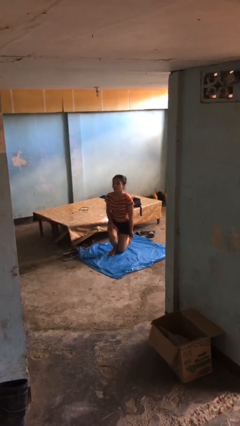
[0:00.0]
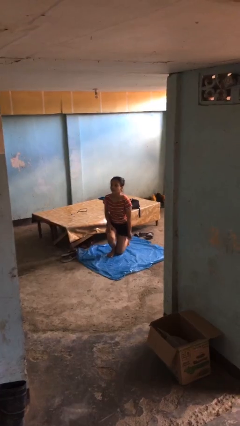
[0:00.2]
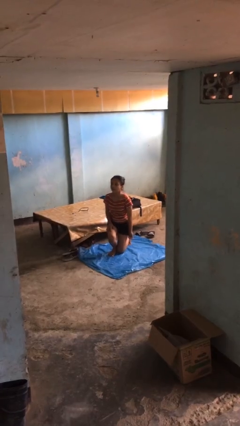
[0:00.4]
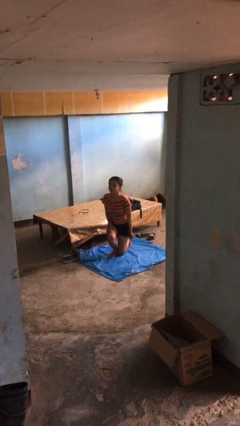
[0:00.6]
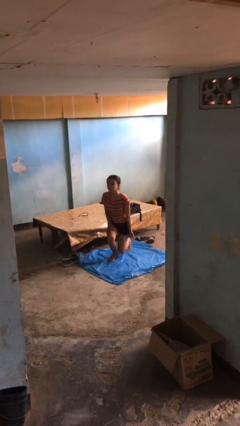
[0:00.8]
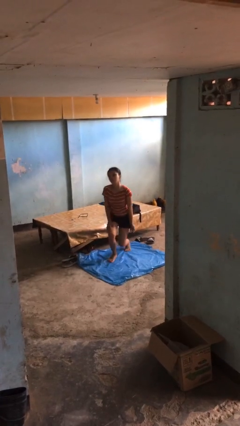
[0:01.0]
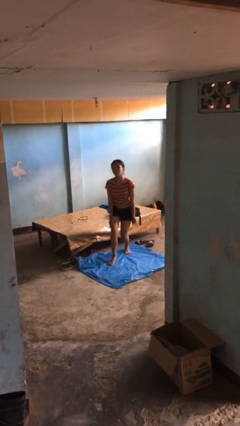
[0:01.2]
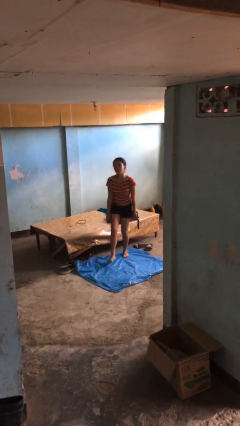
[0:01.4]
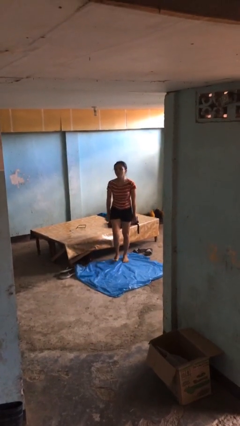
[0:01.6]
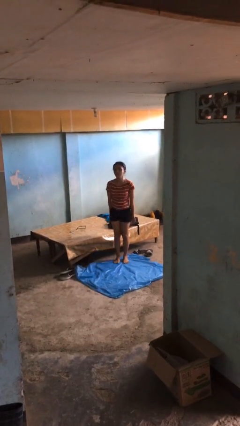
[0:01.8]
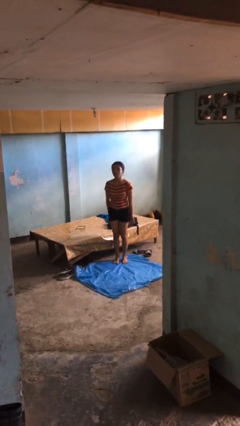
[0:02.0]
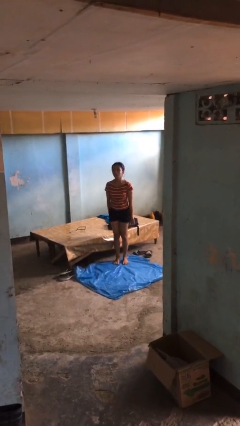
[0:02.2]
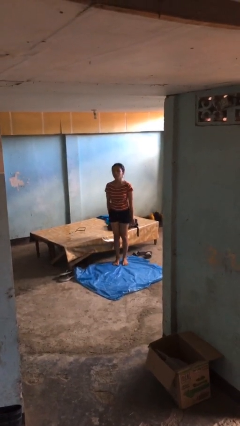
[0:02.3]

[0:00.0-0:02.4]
person stands up from floor

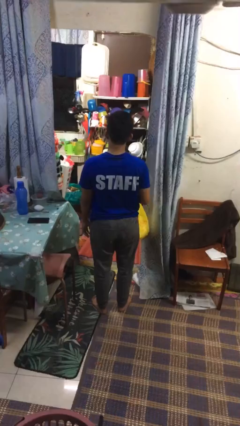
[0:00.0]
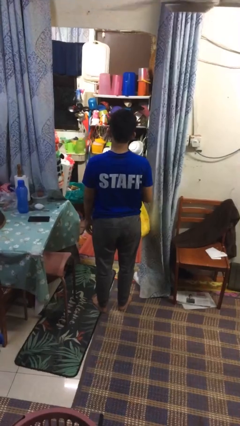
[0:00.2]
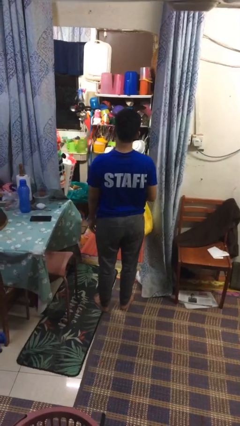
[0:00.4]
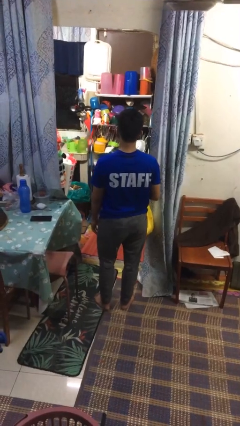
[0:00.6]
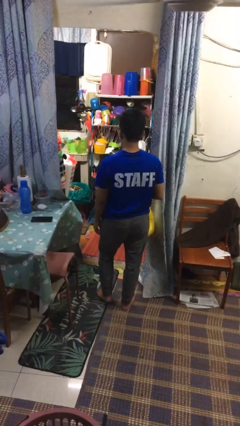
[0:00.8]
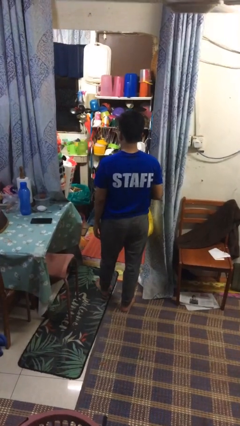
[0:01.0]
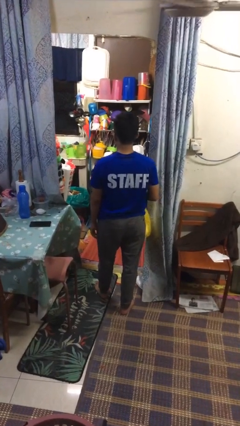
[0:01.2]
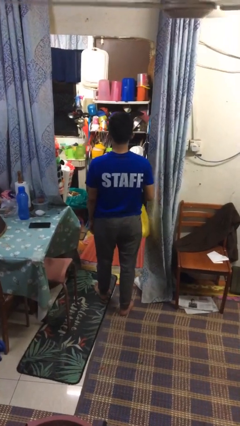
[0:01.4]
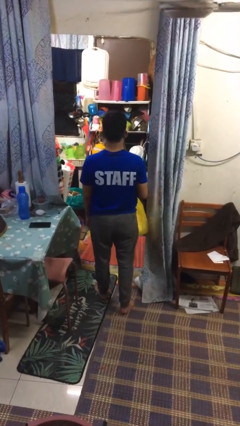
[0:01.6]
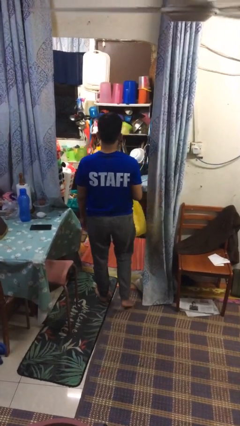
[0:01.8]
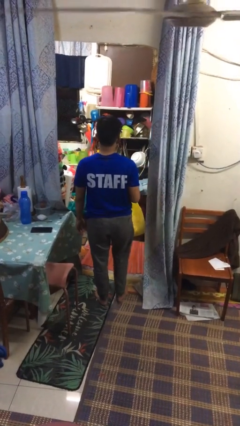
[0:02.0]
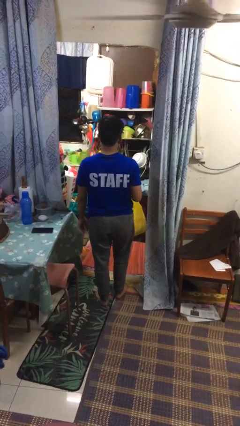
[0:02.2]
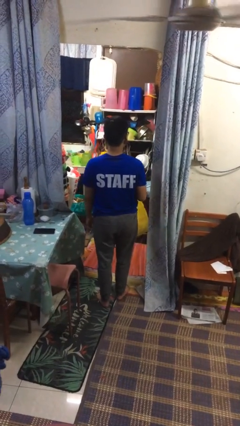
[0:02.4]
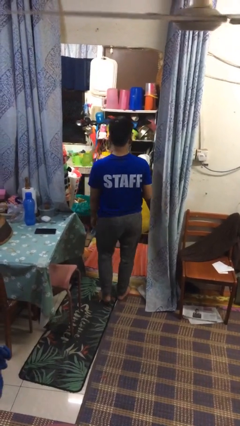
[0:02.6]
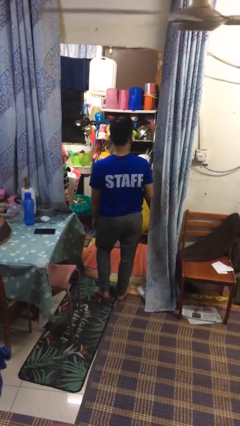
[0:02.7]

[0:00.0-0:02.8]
person carries groceries

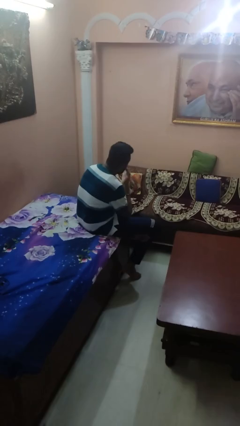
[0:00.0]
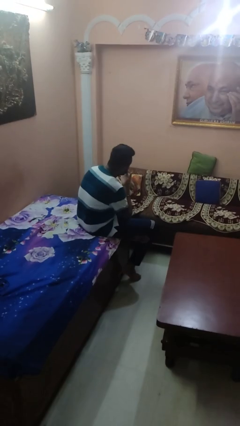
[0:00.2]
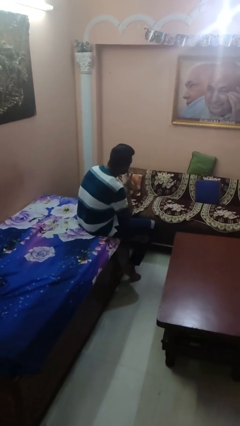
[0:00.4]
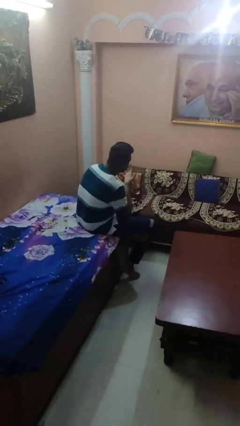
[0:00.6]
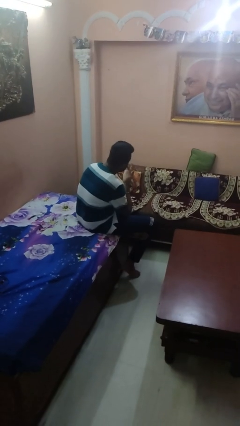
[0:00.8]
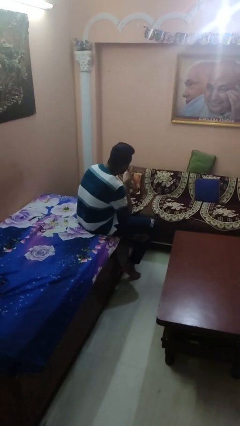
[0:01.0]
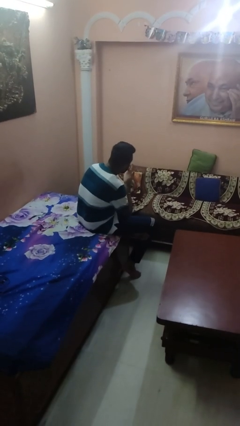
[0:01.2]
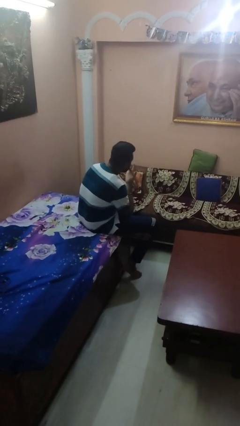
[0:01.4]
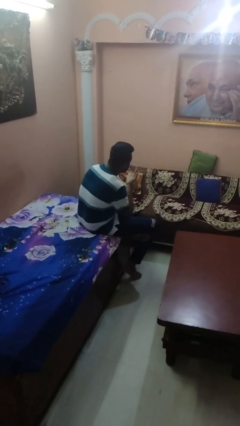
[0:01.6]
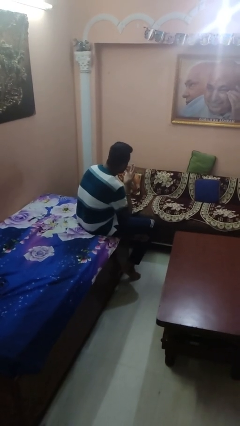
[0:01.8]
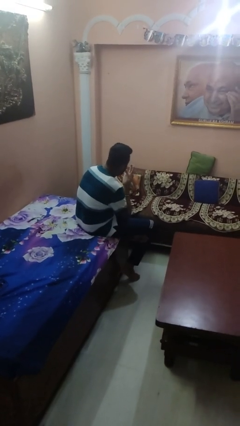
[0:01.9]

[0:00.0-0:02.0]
person licks fingers

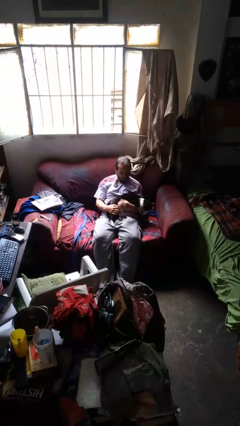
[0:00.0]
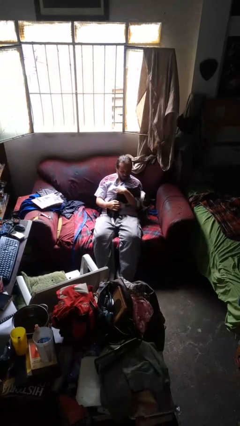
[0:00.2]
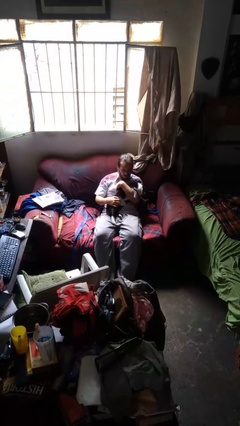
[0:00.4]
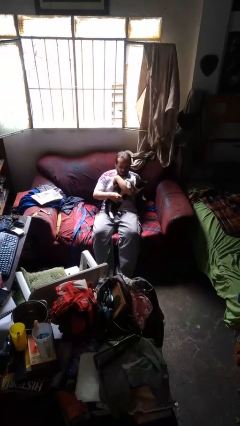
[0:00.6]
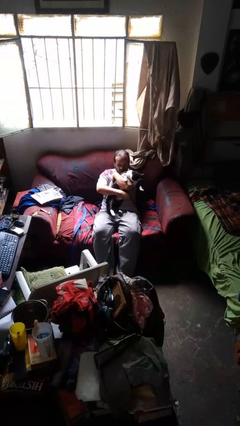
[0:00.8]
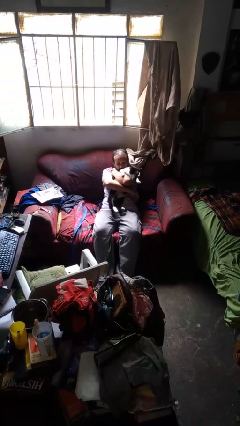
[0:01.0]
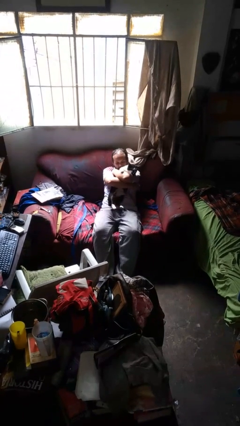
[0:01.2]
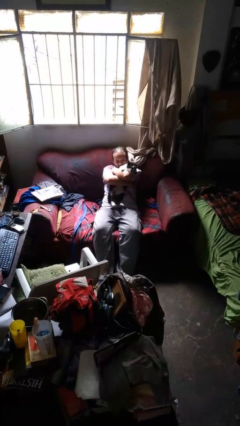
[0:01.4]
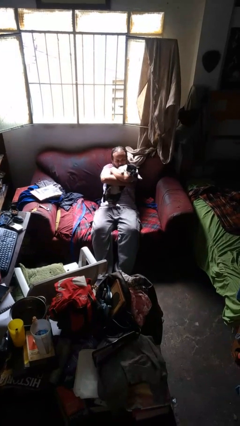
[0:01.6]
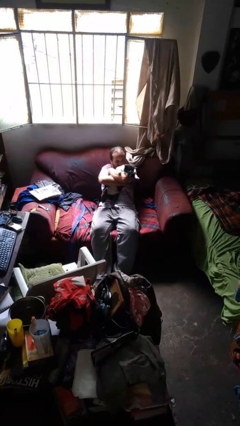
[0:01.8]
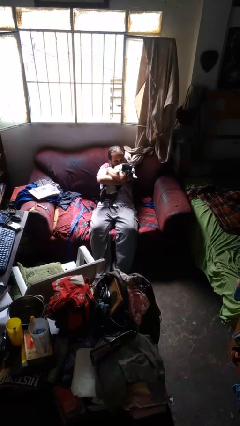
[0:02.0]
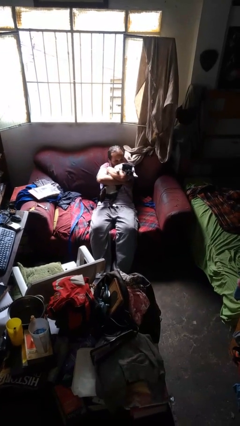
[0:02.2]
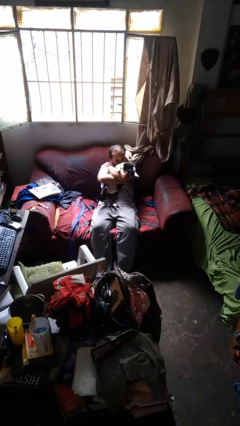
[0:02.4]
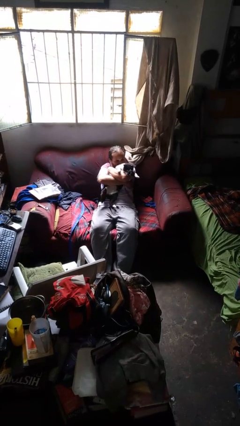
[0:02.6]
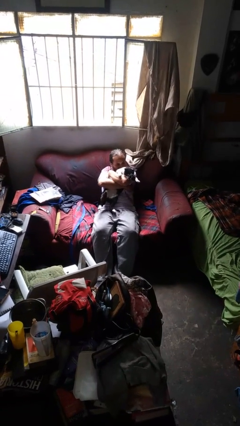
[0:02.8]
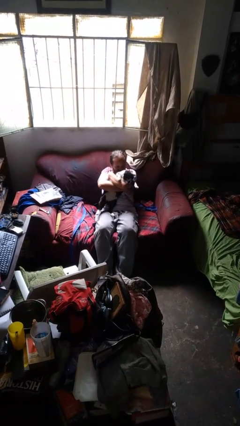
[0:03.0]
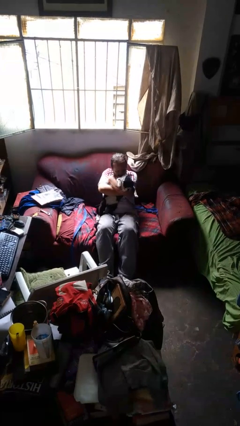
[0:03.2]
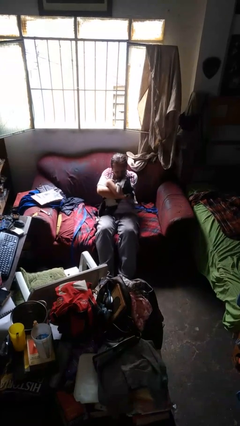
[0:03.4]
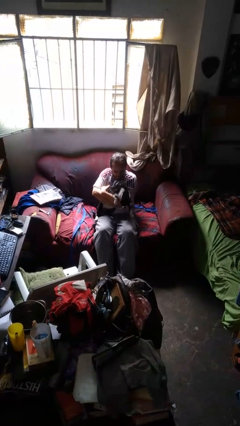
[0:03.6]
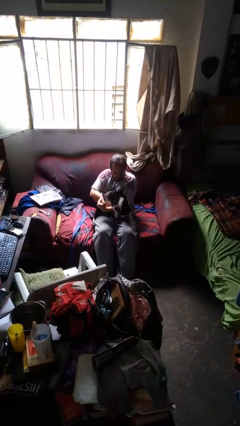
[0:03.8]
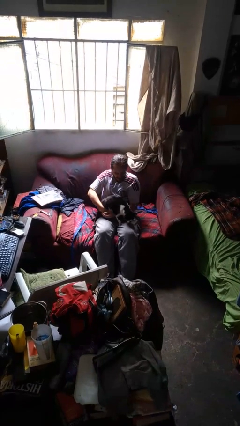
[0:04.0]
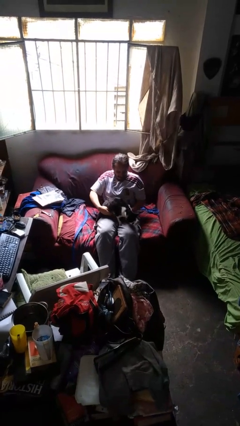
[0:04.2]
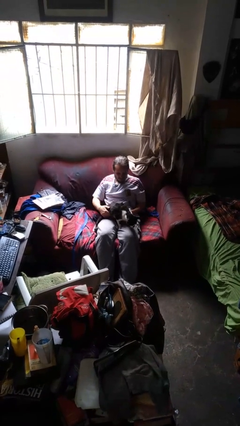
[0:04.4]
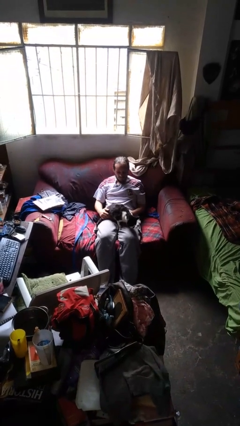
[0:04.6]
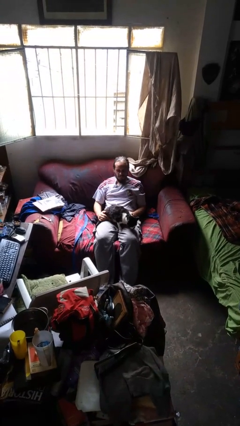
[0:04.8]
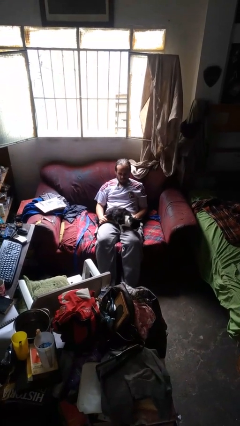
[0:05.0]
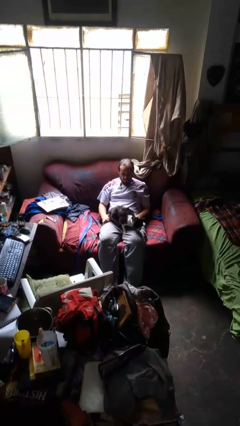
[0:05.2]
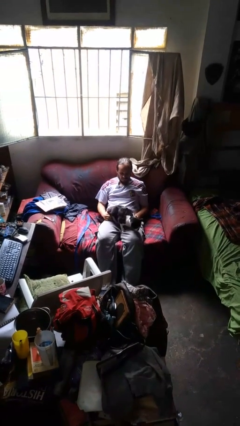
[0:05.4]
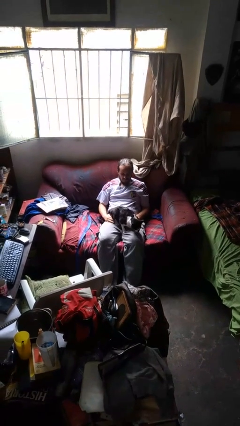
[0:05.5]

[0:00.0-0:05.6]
person hugs dog

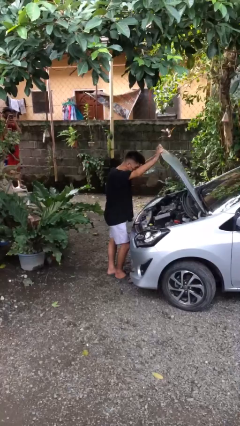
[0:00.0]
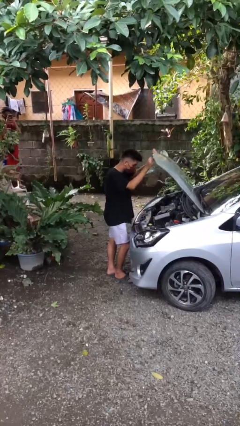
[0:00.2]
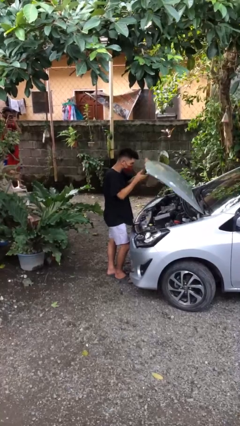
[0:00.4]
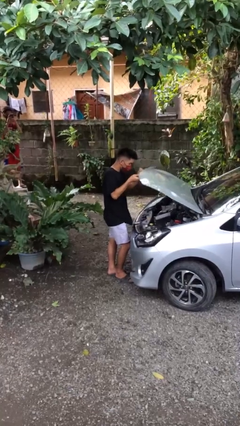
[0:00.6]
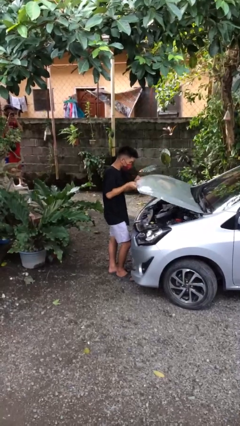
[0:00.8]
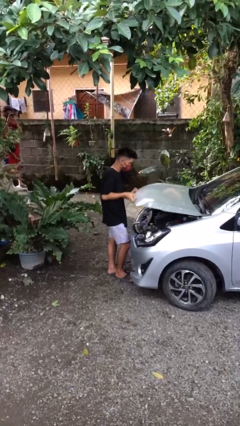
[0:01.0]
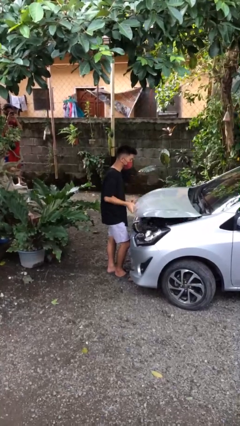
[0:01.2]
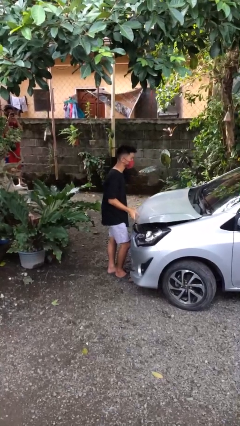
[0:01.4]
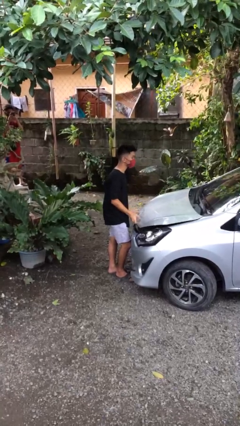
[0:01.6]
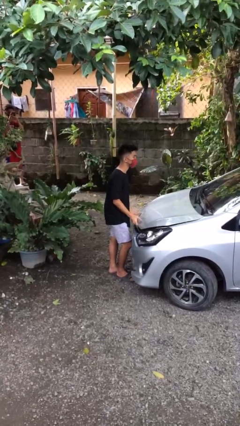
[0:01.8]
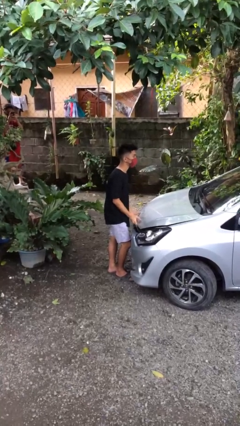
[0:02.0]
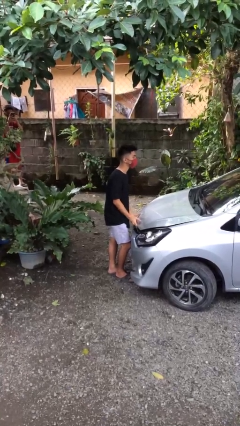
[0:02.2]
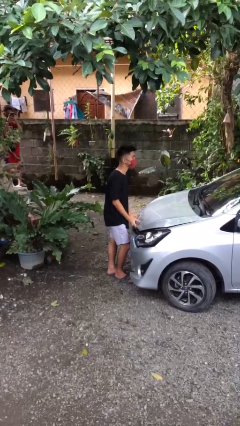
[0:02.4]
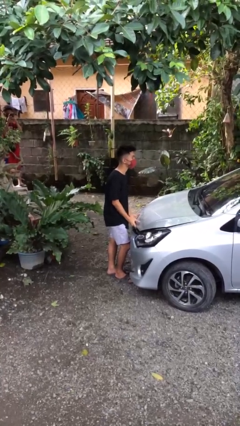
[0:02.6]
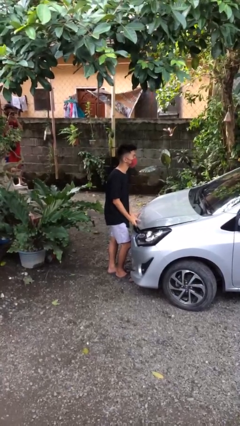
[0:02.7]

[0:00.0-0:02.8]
person closes car hood

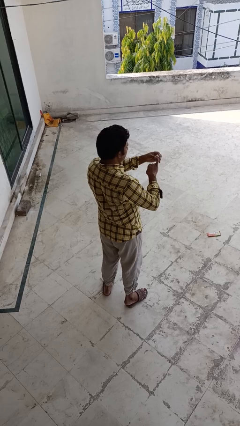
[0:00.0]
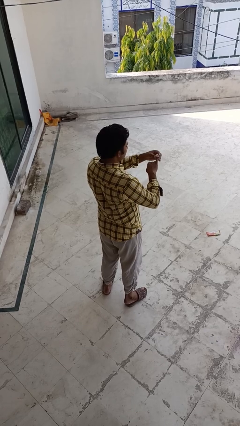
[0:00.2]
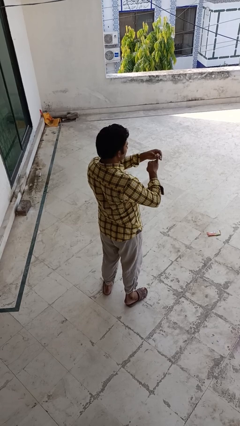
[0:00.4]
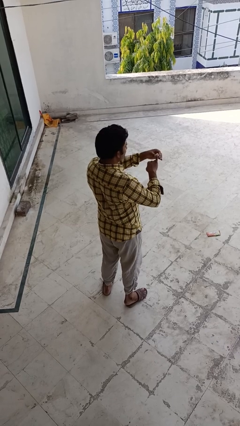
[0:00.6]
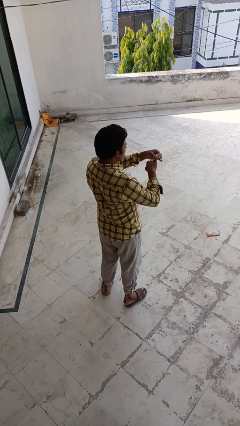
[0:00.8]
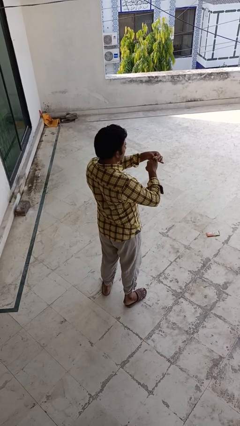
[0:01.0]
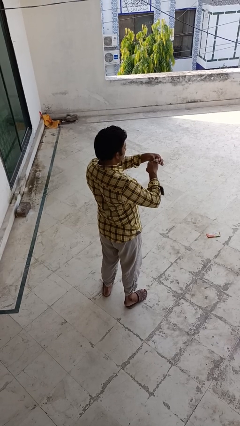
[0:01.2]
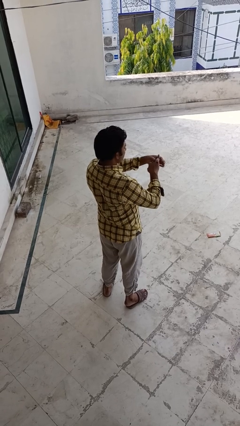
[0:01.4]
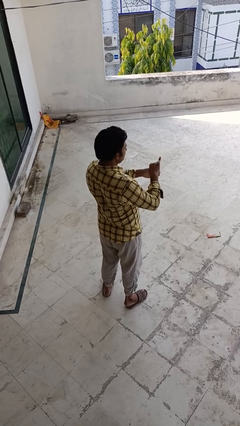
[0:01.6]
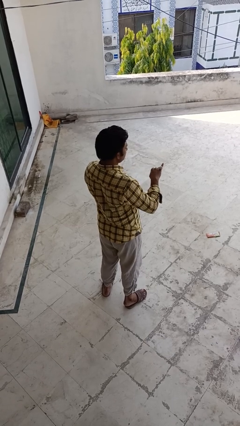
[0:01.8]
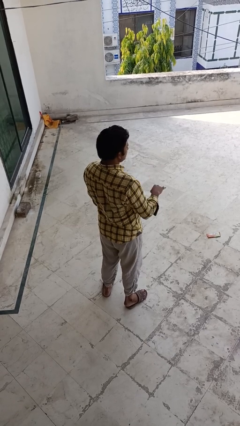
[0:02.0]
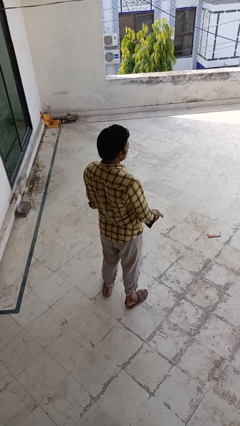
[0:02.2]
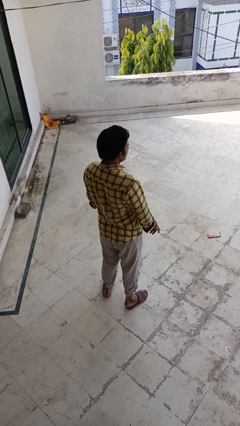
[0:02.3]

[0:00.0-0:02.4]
person puts on ring
